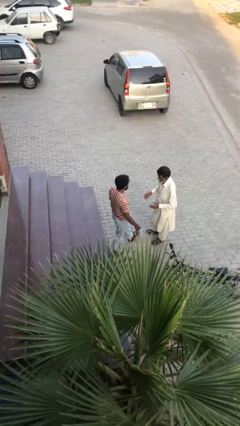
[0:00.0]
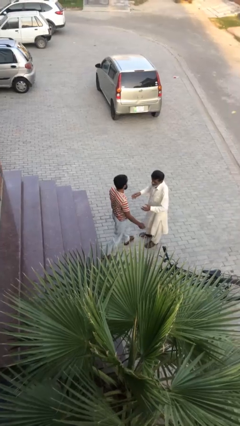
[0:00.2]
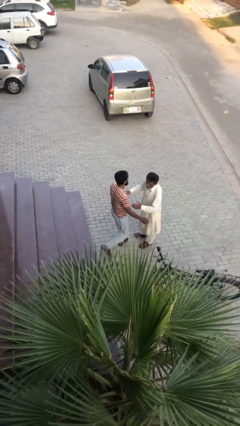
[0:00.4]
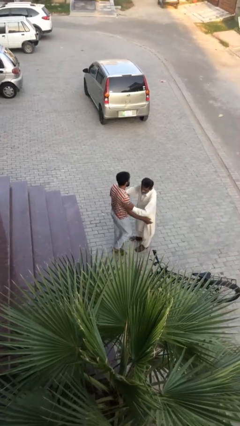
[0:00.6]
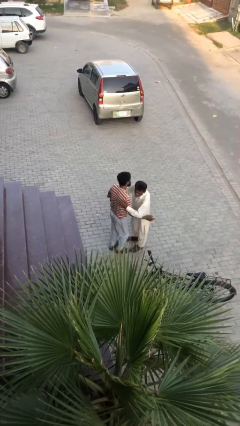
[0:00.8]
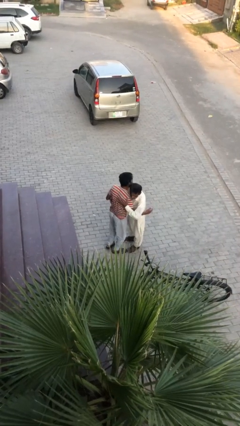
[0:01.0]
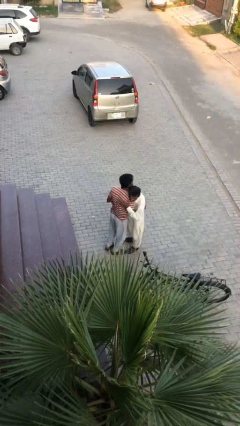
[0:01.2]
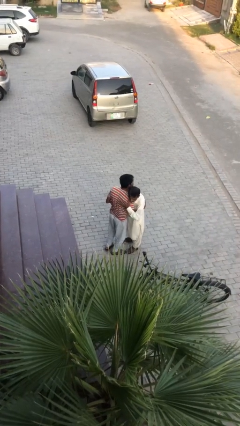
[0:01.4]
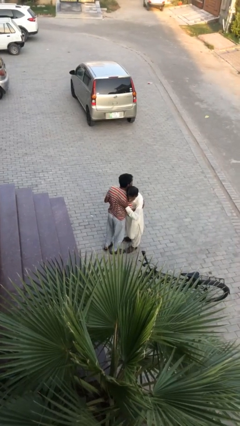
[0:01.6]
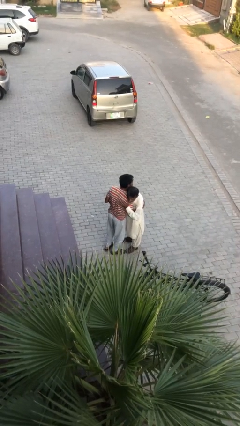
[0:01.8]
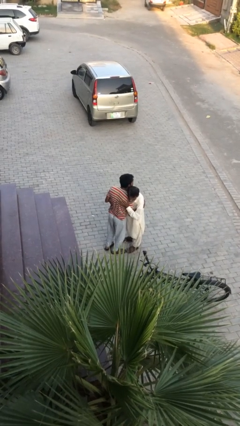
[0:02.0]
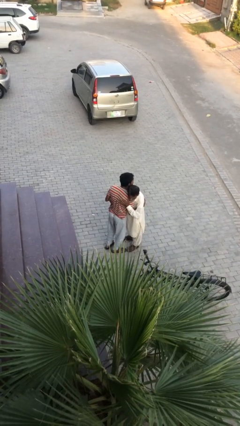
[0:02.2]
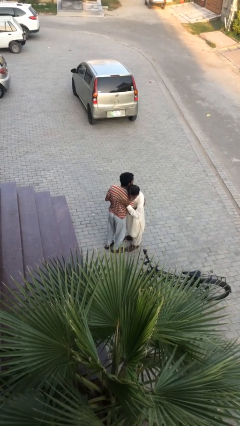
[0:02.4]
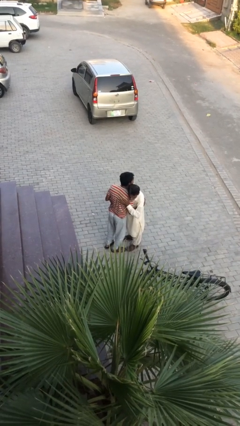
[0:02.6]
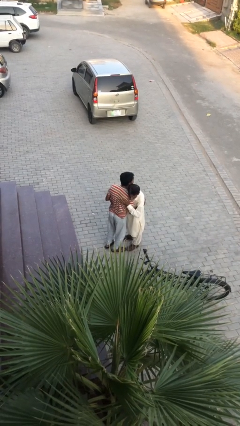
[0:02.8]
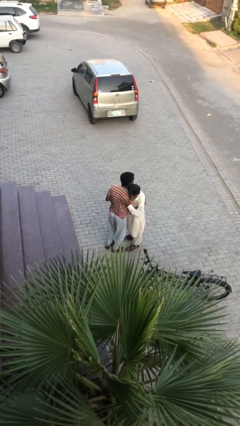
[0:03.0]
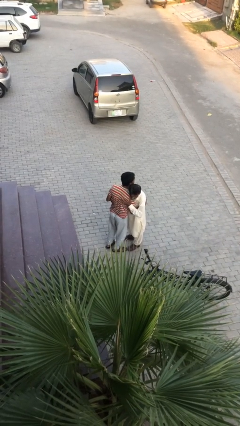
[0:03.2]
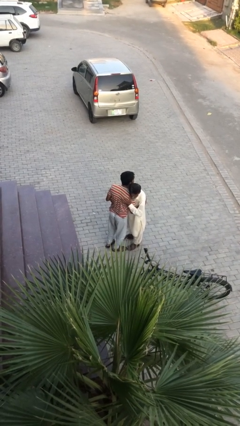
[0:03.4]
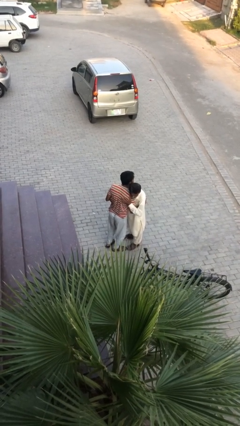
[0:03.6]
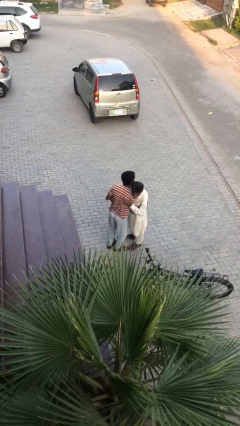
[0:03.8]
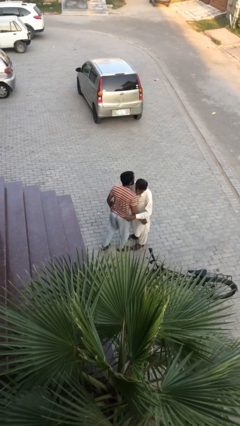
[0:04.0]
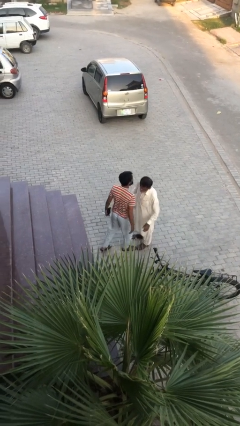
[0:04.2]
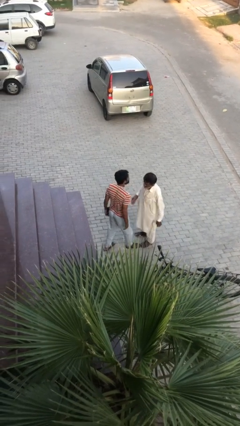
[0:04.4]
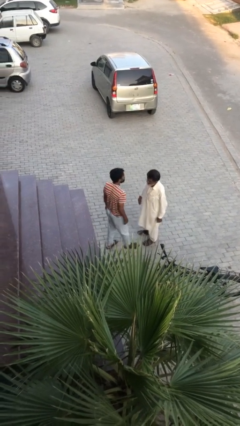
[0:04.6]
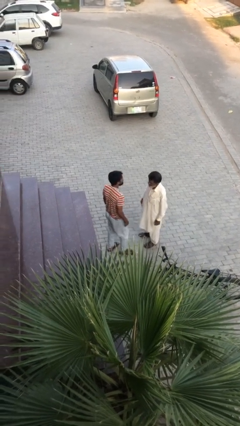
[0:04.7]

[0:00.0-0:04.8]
person embraces person

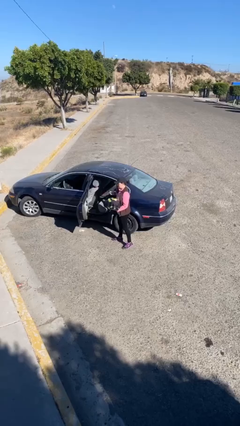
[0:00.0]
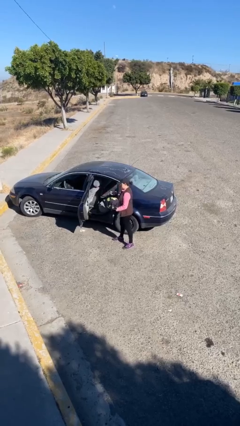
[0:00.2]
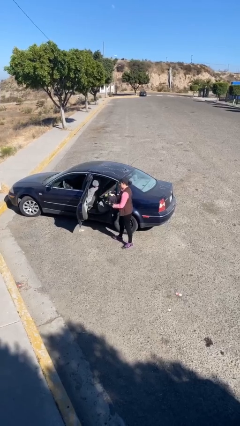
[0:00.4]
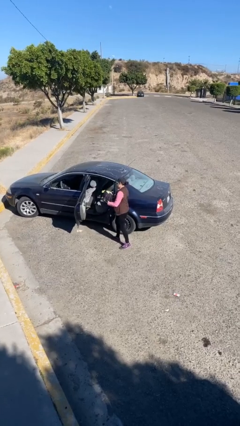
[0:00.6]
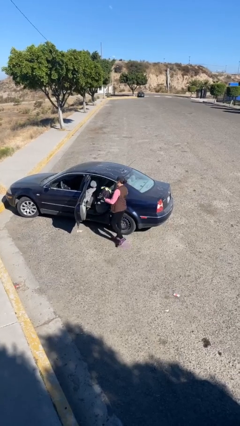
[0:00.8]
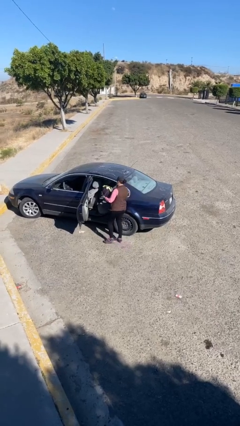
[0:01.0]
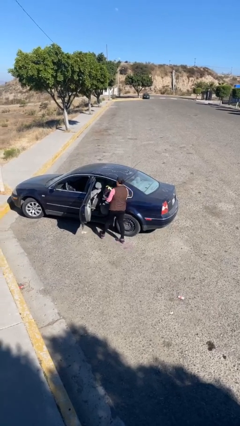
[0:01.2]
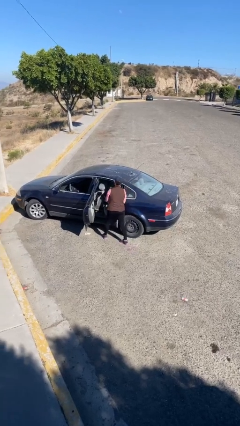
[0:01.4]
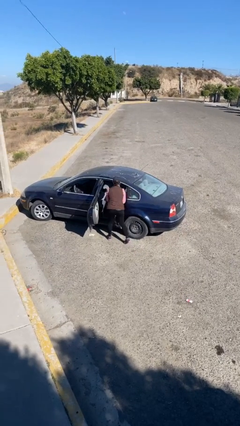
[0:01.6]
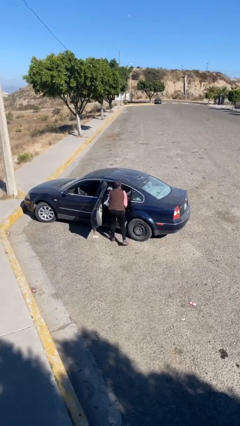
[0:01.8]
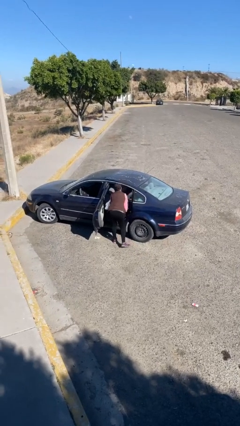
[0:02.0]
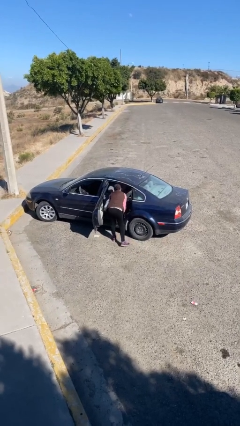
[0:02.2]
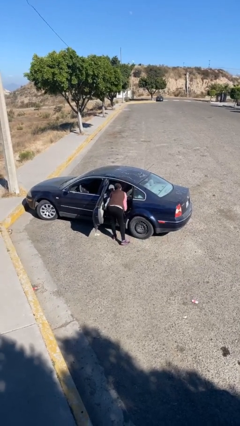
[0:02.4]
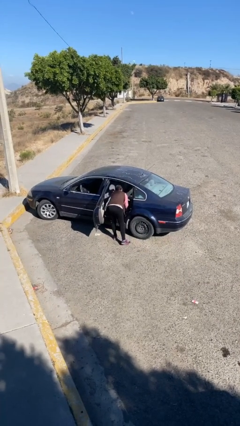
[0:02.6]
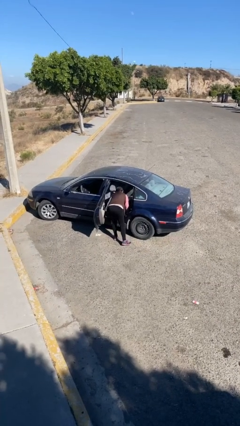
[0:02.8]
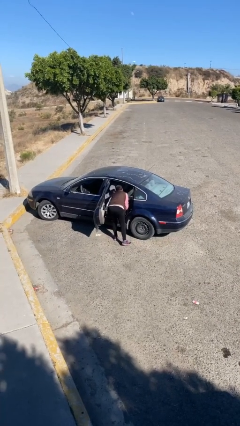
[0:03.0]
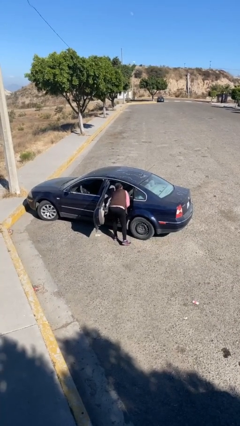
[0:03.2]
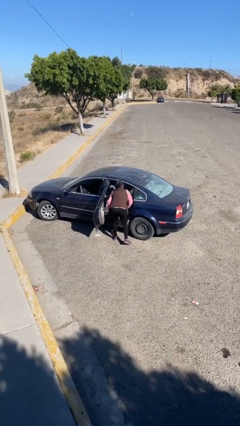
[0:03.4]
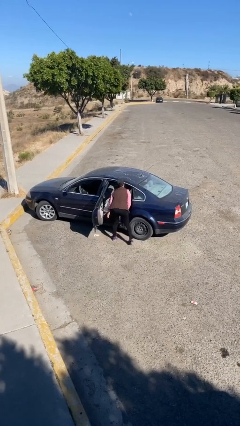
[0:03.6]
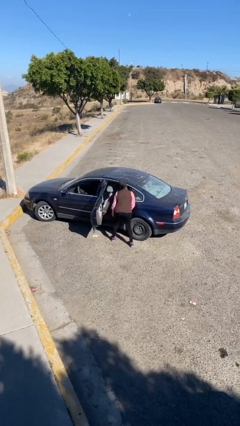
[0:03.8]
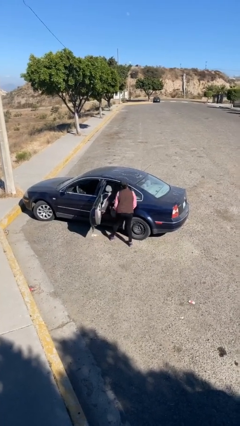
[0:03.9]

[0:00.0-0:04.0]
person loads car

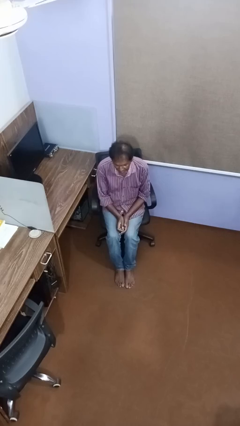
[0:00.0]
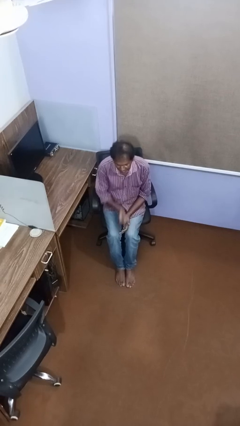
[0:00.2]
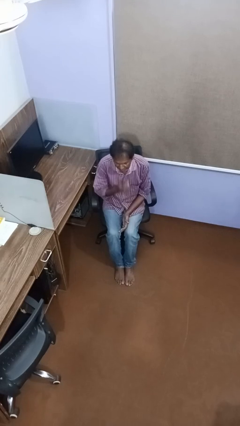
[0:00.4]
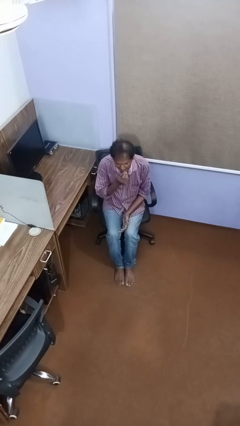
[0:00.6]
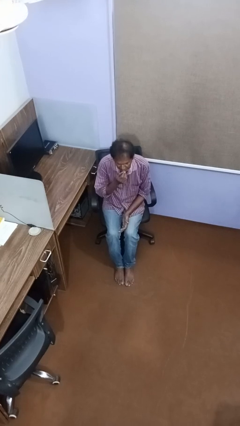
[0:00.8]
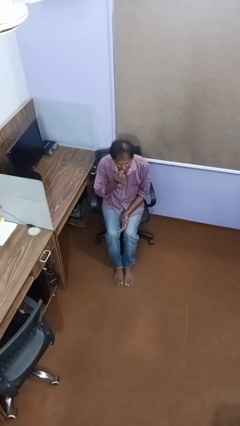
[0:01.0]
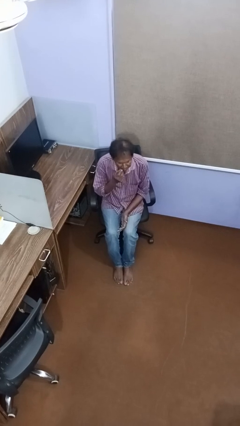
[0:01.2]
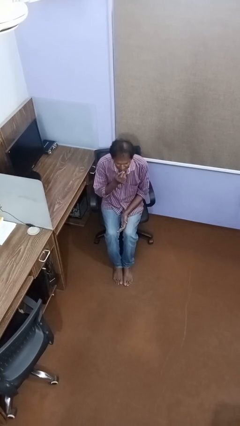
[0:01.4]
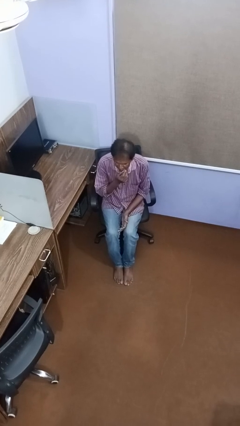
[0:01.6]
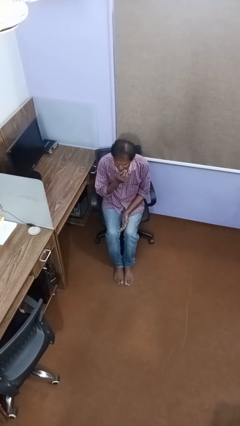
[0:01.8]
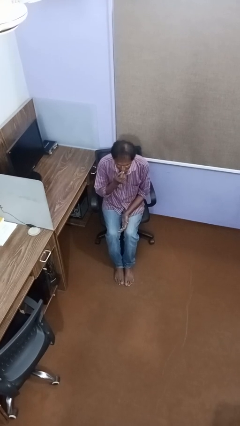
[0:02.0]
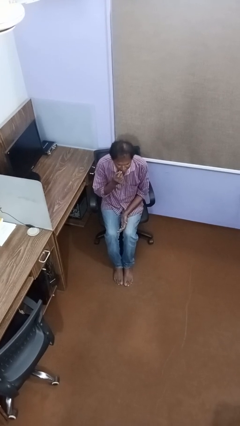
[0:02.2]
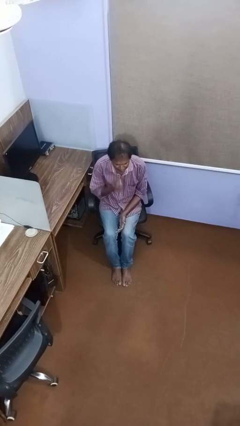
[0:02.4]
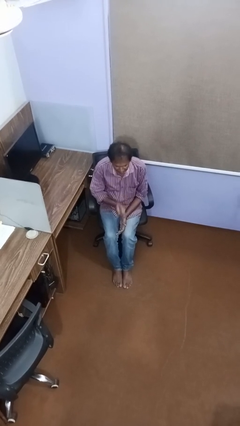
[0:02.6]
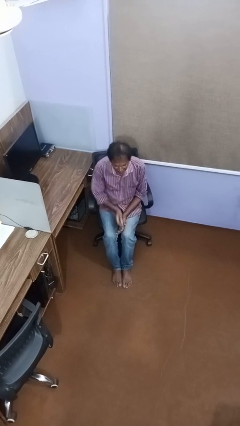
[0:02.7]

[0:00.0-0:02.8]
person applies lip makeup

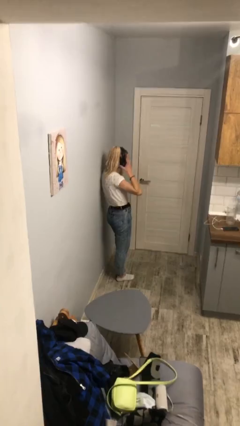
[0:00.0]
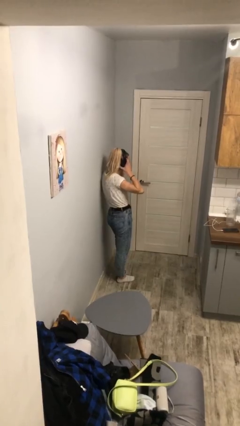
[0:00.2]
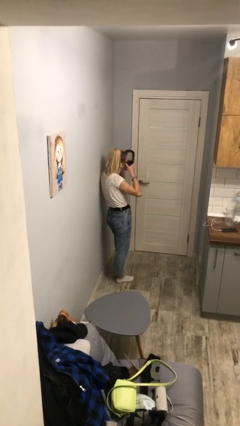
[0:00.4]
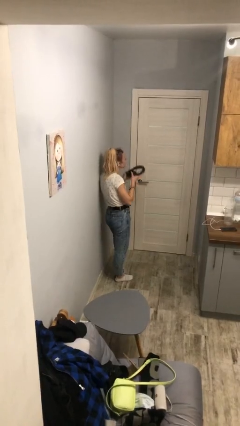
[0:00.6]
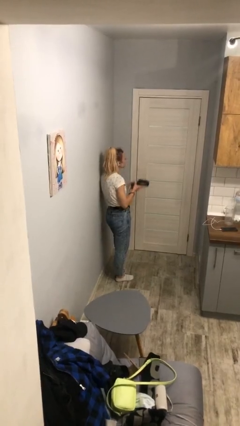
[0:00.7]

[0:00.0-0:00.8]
person takes off headphones

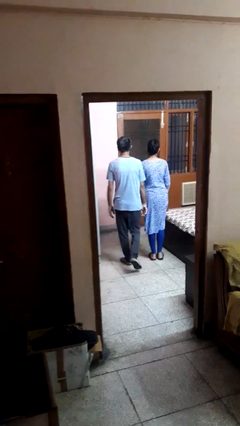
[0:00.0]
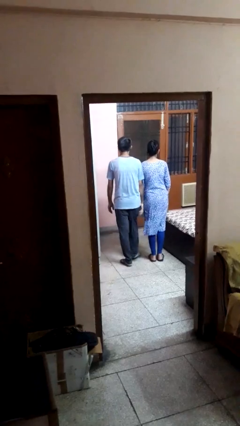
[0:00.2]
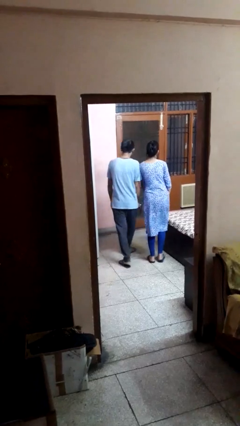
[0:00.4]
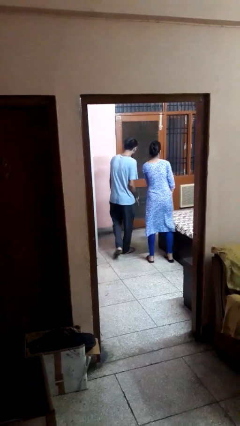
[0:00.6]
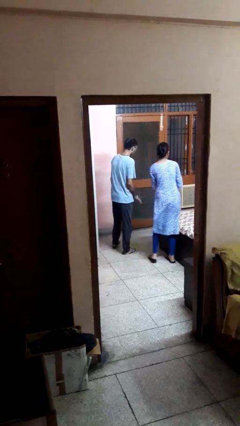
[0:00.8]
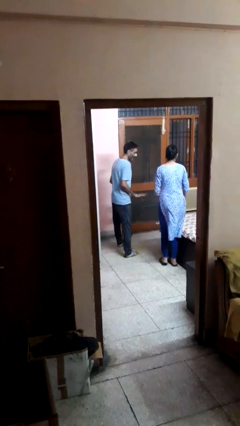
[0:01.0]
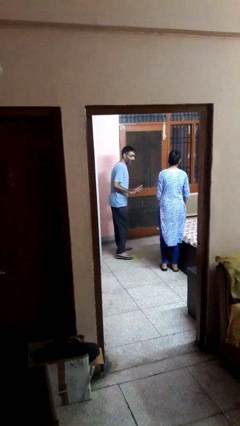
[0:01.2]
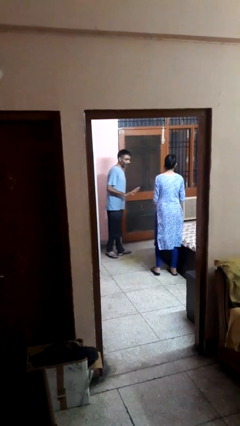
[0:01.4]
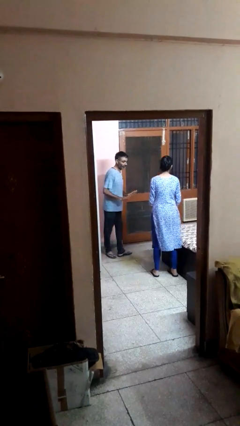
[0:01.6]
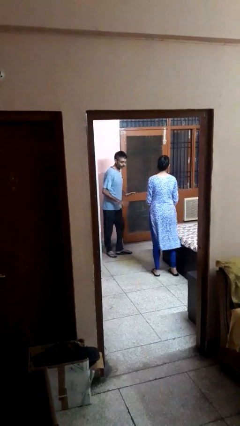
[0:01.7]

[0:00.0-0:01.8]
person bumps into person

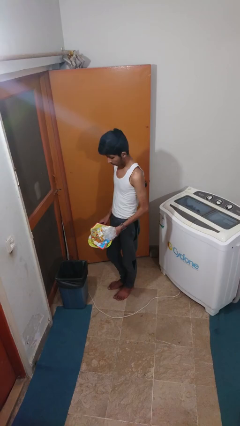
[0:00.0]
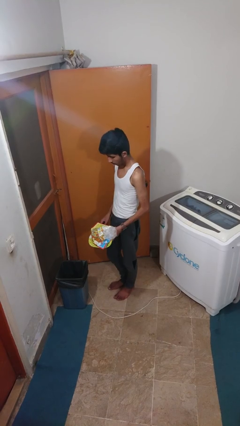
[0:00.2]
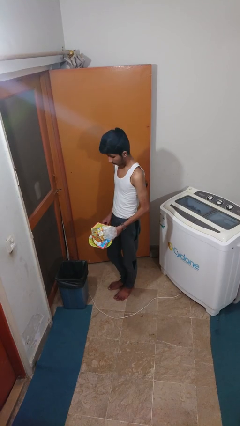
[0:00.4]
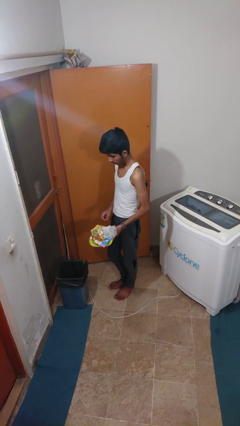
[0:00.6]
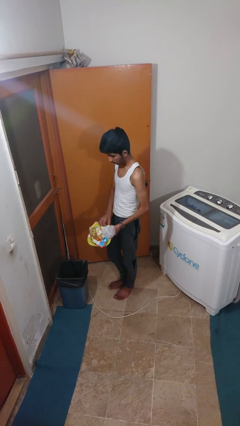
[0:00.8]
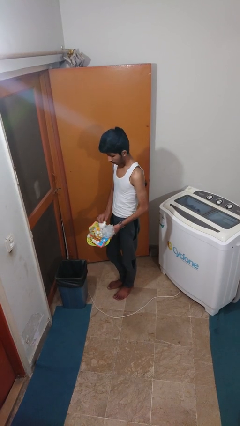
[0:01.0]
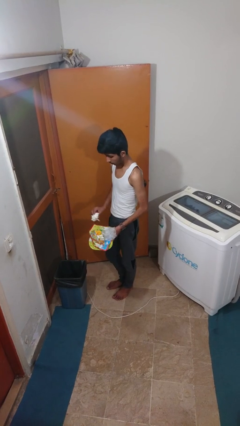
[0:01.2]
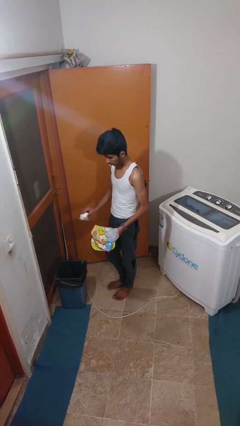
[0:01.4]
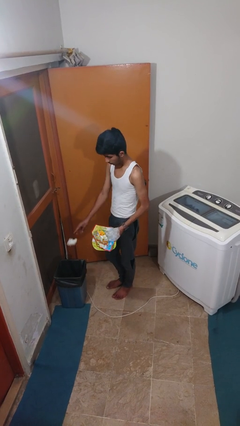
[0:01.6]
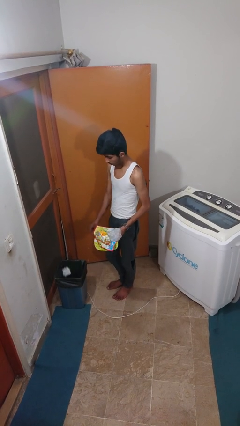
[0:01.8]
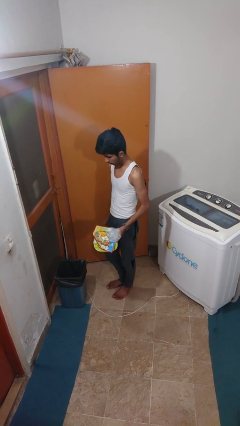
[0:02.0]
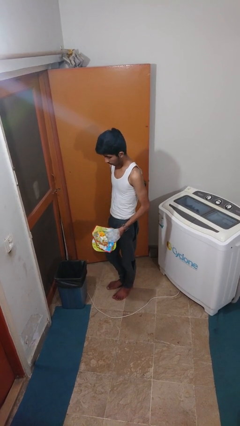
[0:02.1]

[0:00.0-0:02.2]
person discards trash

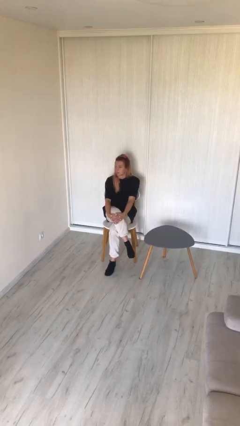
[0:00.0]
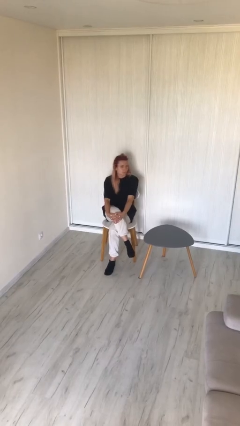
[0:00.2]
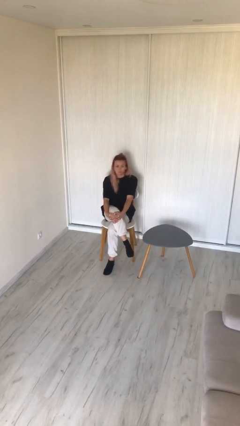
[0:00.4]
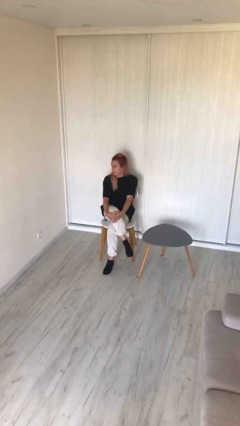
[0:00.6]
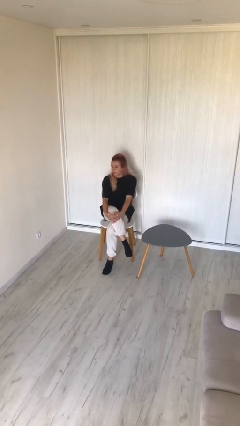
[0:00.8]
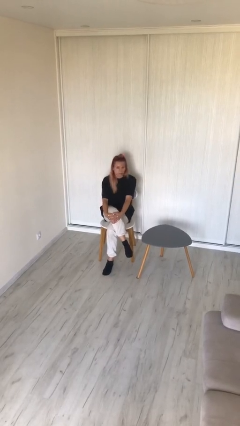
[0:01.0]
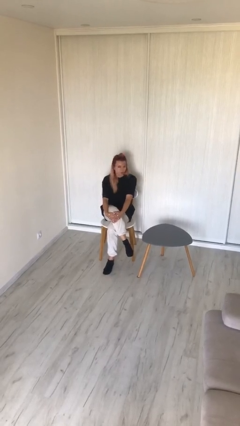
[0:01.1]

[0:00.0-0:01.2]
person shakes head
